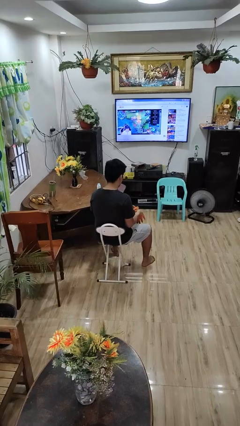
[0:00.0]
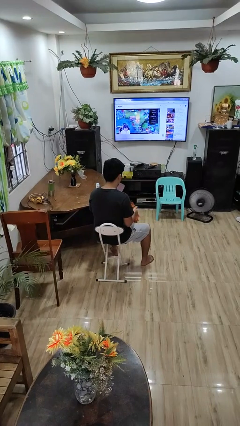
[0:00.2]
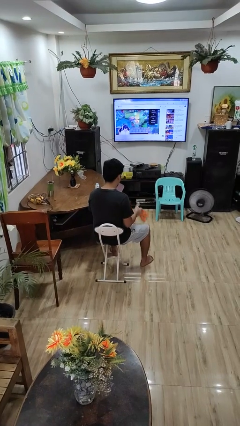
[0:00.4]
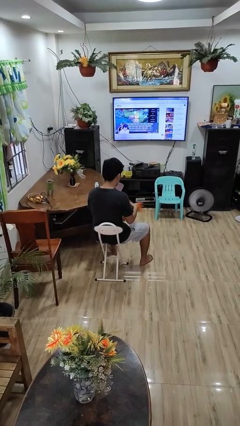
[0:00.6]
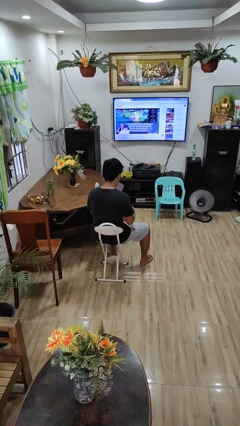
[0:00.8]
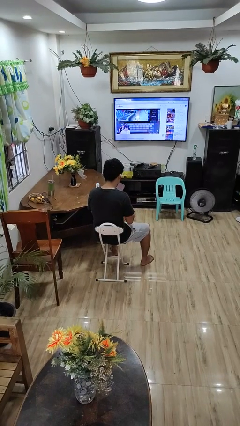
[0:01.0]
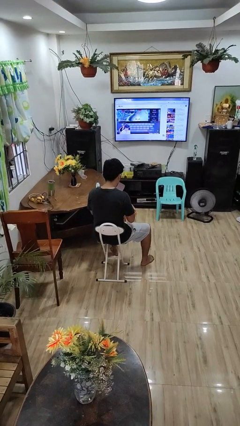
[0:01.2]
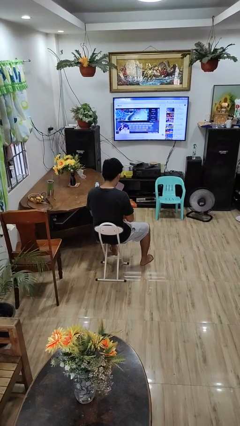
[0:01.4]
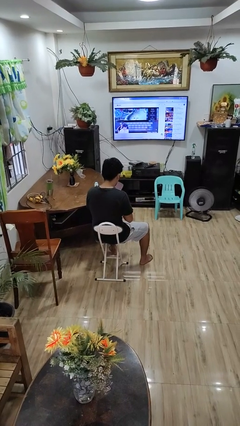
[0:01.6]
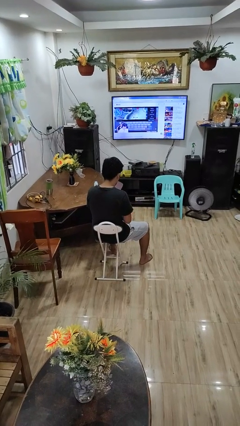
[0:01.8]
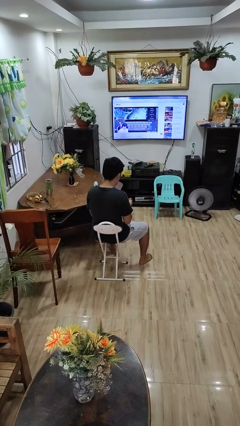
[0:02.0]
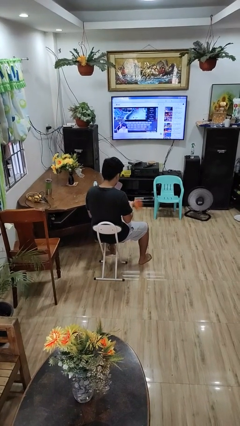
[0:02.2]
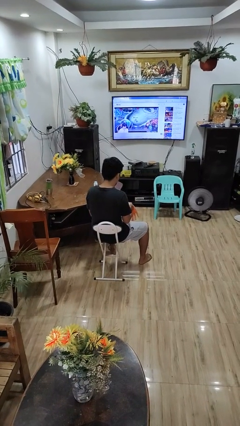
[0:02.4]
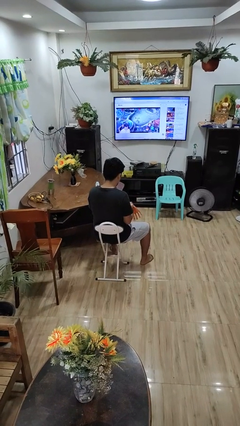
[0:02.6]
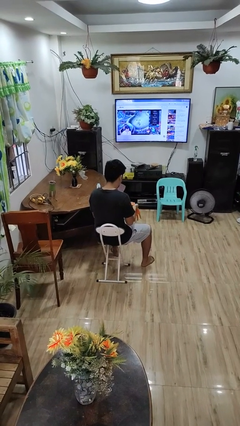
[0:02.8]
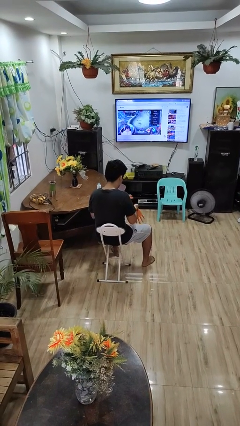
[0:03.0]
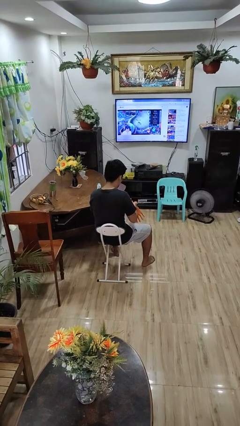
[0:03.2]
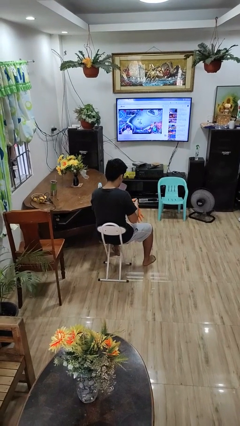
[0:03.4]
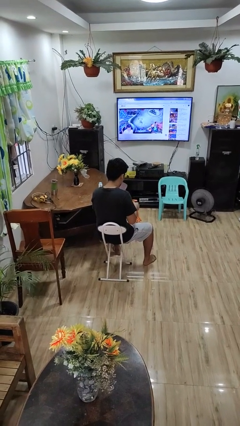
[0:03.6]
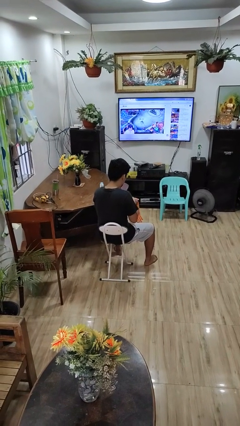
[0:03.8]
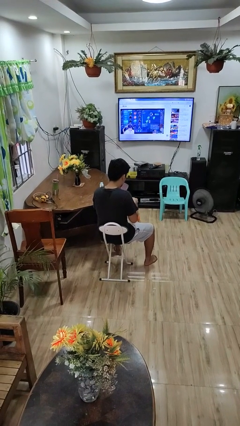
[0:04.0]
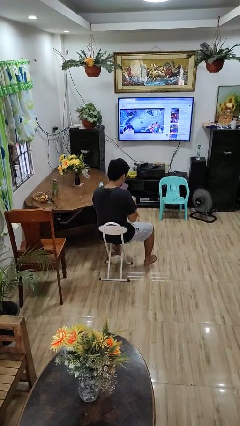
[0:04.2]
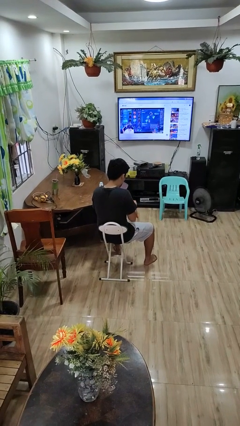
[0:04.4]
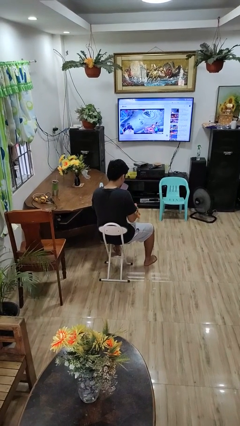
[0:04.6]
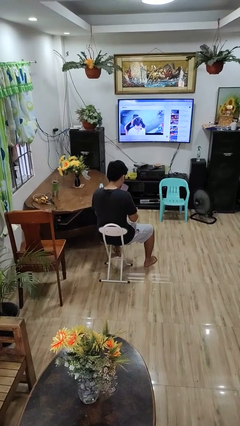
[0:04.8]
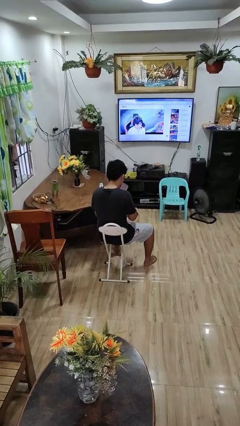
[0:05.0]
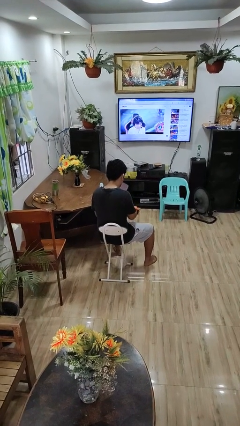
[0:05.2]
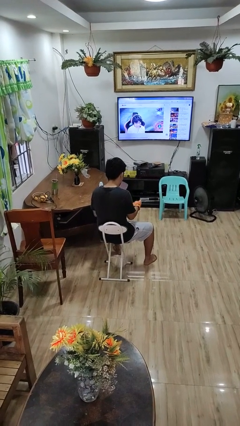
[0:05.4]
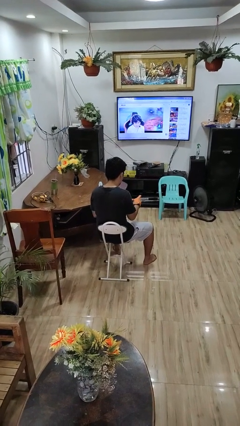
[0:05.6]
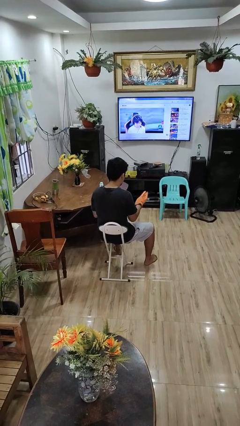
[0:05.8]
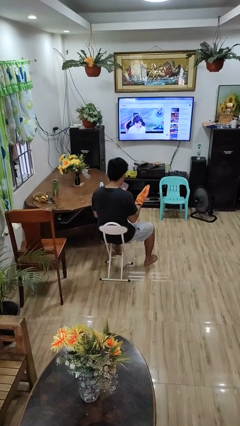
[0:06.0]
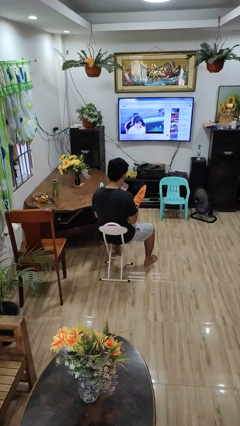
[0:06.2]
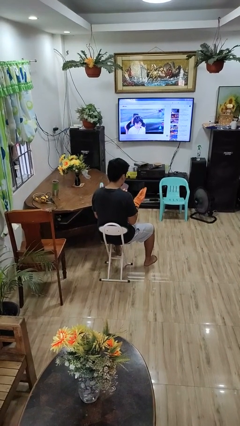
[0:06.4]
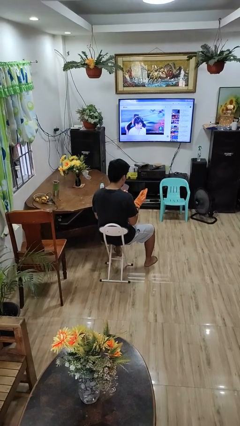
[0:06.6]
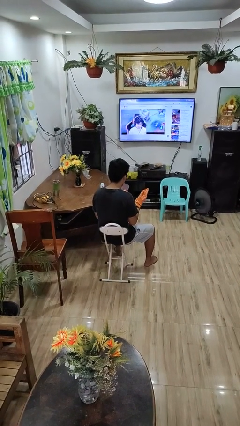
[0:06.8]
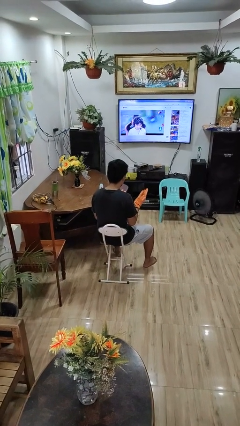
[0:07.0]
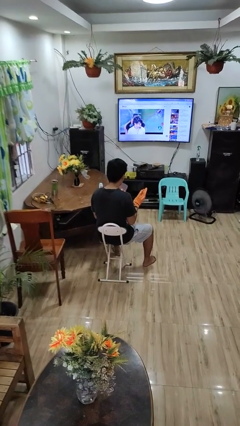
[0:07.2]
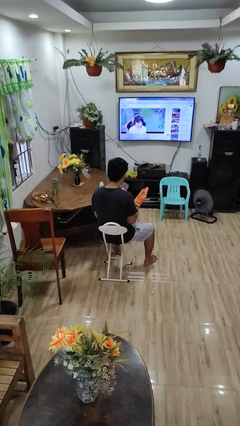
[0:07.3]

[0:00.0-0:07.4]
person puts on gloves

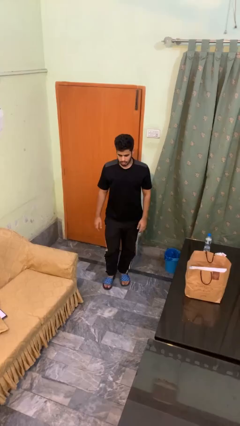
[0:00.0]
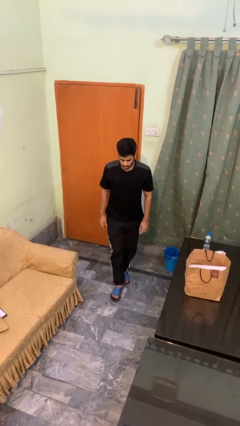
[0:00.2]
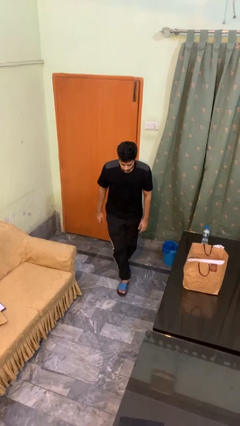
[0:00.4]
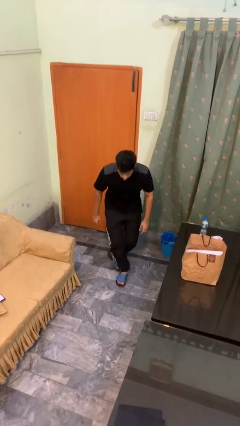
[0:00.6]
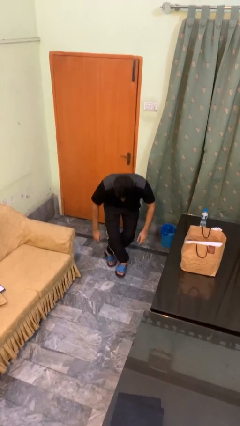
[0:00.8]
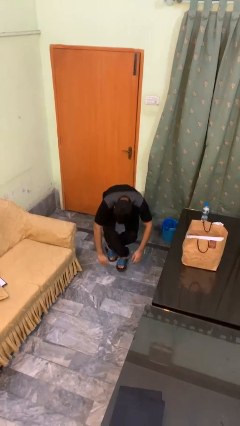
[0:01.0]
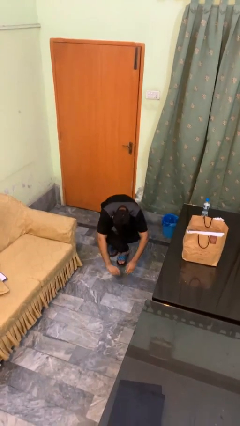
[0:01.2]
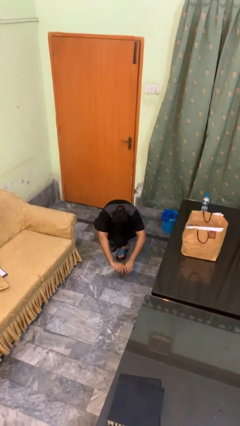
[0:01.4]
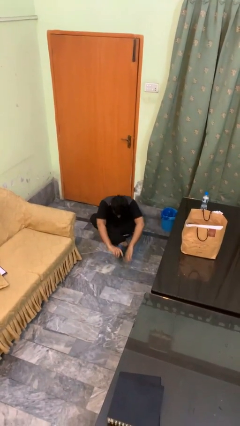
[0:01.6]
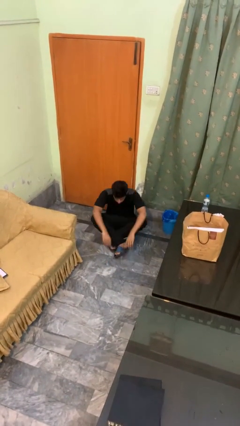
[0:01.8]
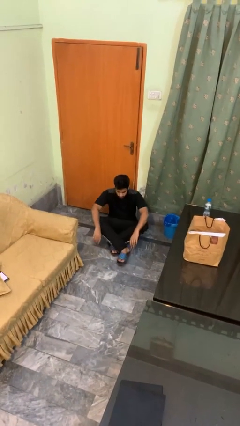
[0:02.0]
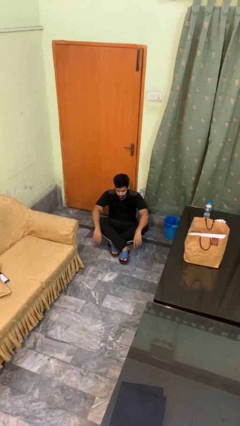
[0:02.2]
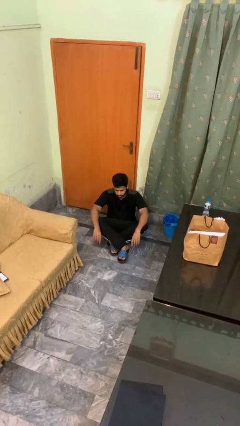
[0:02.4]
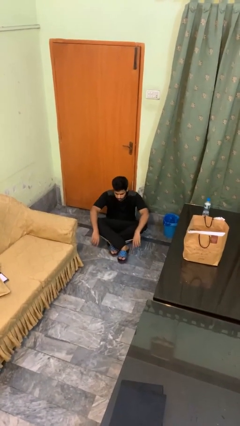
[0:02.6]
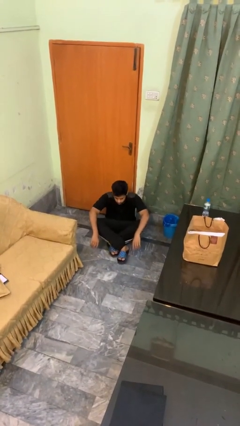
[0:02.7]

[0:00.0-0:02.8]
person sits crisscross

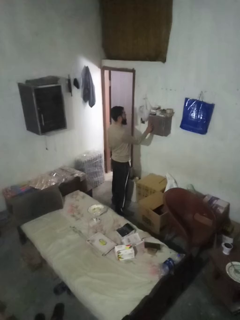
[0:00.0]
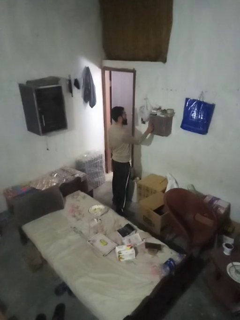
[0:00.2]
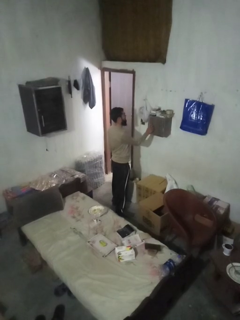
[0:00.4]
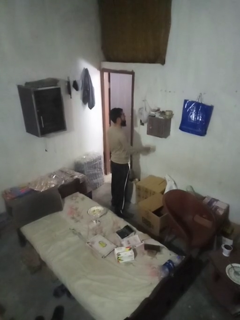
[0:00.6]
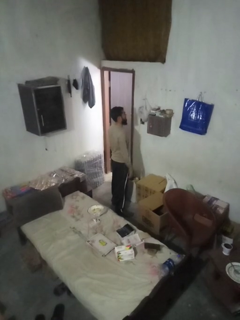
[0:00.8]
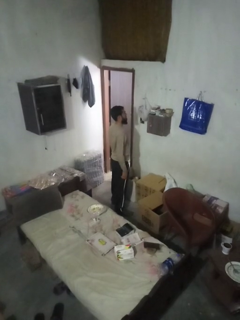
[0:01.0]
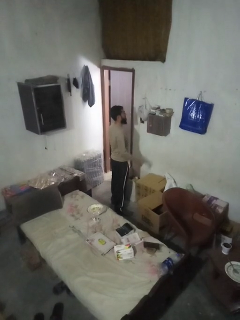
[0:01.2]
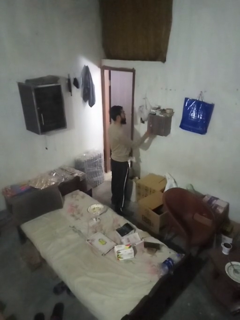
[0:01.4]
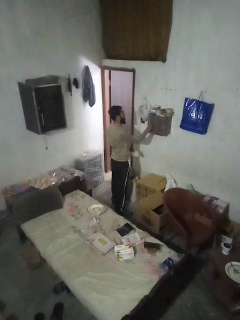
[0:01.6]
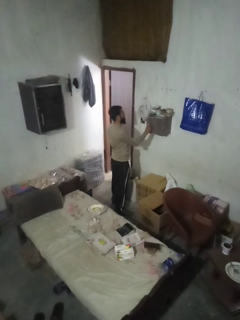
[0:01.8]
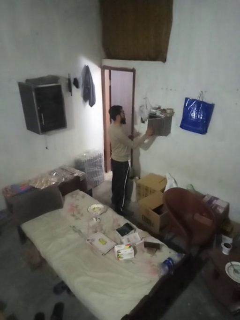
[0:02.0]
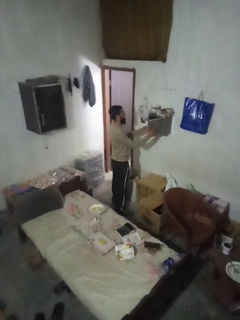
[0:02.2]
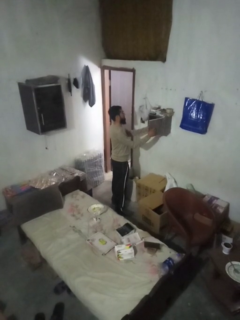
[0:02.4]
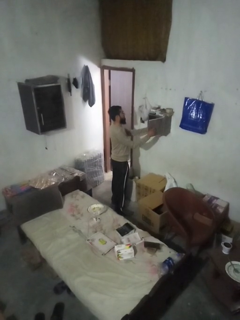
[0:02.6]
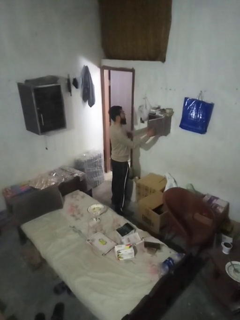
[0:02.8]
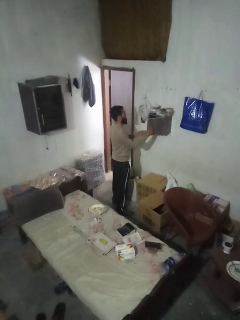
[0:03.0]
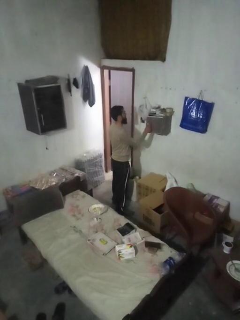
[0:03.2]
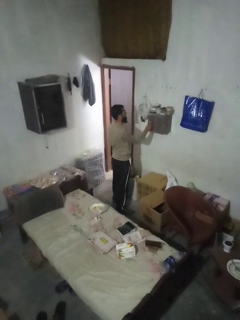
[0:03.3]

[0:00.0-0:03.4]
person puts letters in mailbox

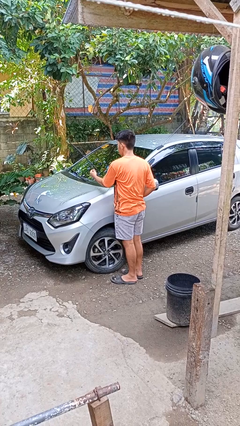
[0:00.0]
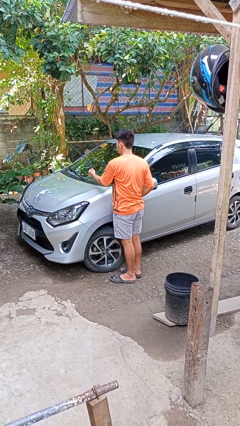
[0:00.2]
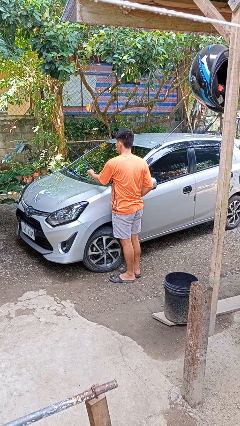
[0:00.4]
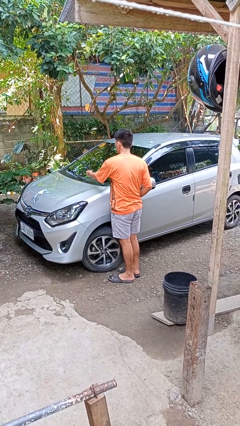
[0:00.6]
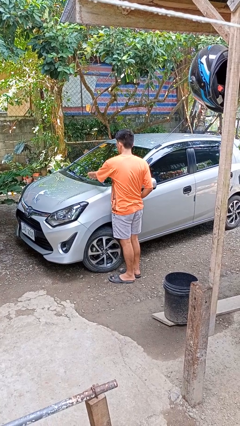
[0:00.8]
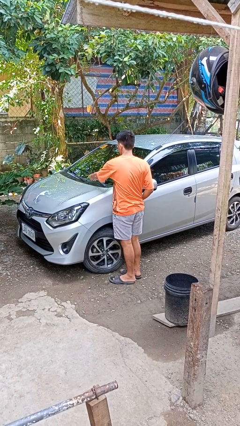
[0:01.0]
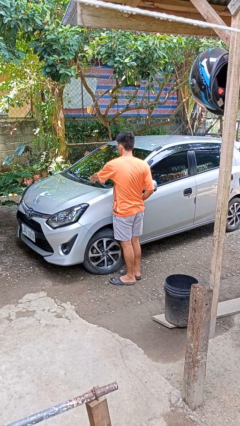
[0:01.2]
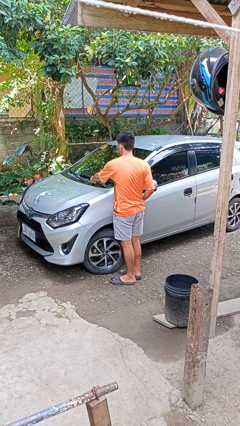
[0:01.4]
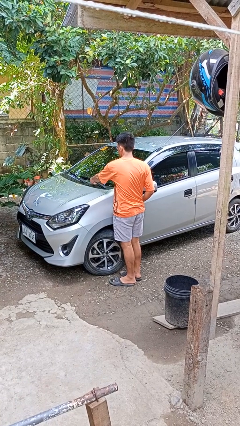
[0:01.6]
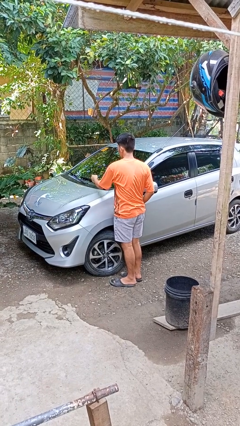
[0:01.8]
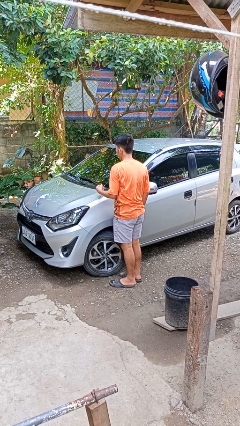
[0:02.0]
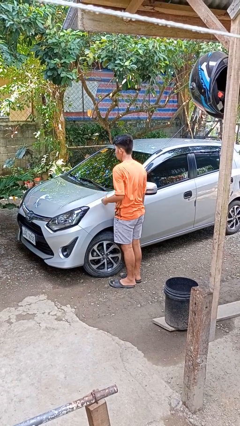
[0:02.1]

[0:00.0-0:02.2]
person flips down car wipers

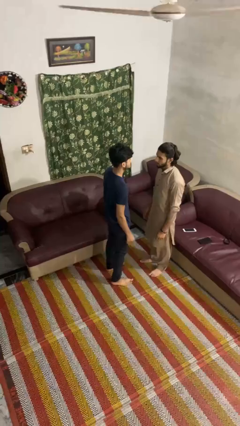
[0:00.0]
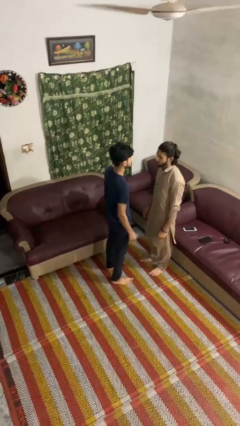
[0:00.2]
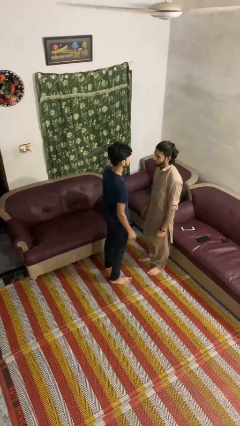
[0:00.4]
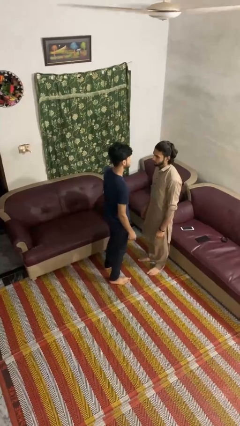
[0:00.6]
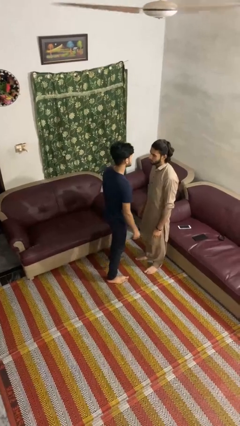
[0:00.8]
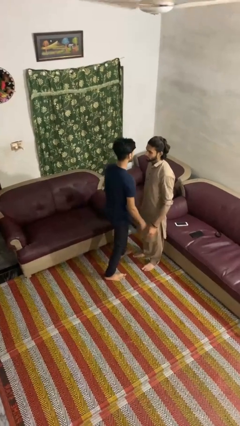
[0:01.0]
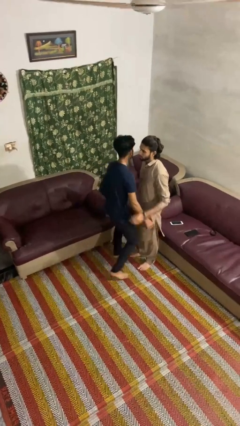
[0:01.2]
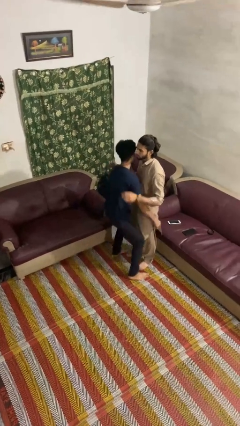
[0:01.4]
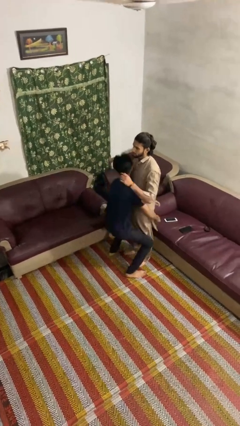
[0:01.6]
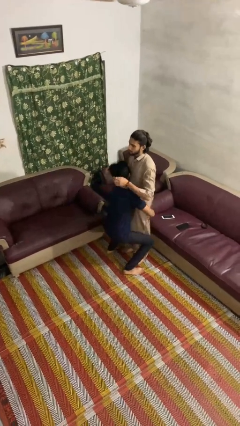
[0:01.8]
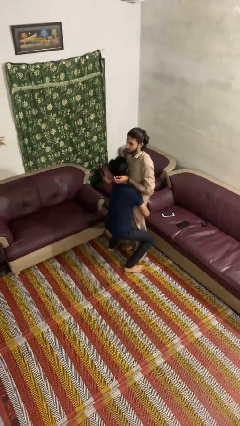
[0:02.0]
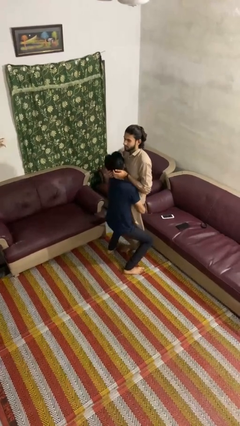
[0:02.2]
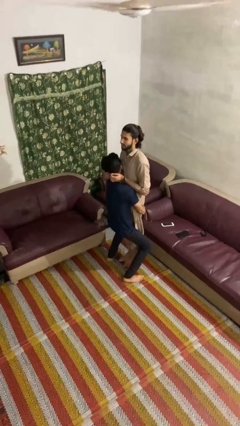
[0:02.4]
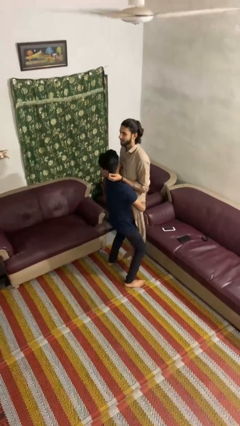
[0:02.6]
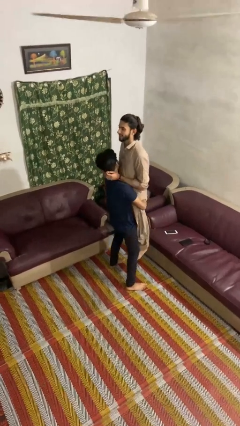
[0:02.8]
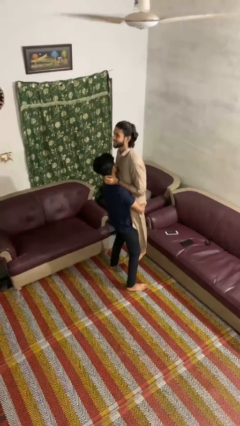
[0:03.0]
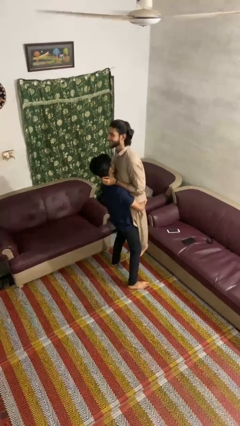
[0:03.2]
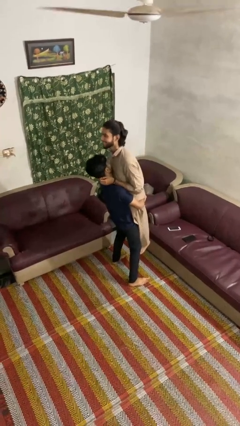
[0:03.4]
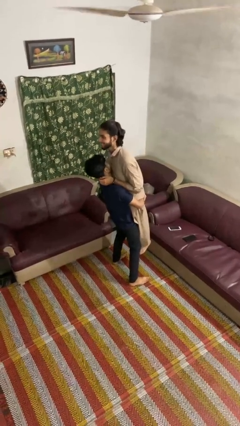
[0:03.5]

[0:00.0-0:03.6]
person picks up person
